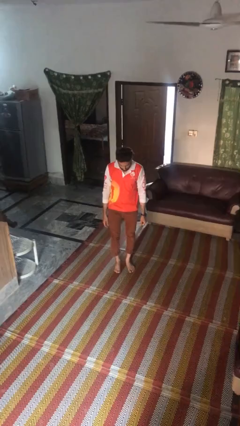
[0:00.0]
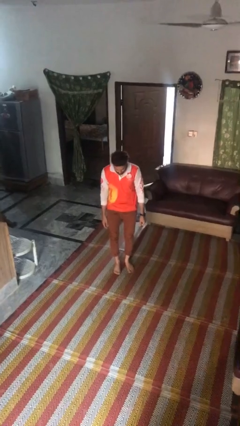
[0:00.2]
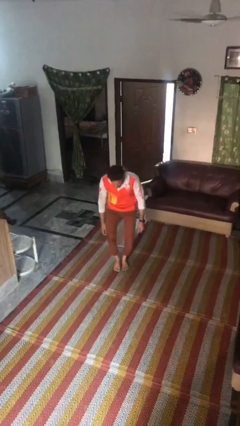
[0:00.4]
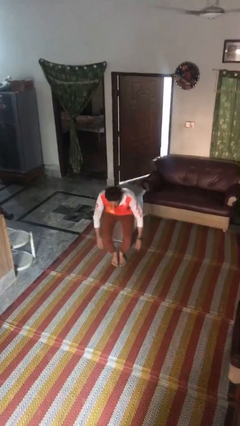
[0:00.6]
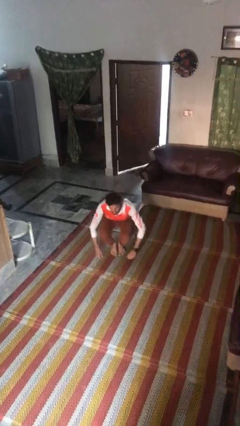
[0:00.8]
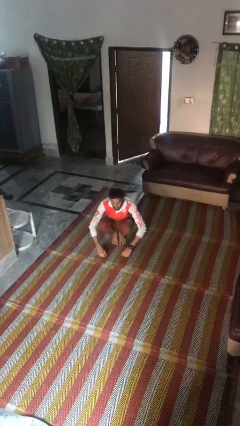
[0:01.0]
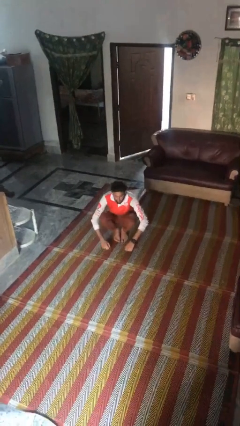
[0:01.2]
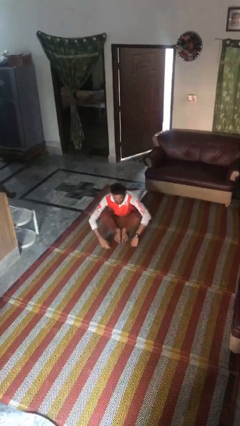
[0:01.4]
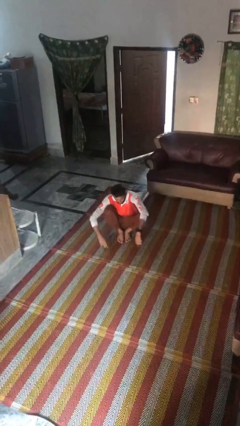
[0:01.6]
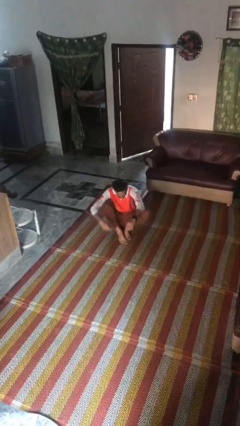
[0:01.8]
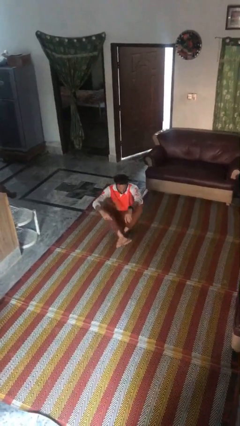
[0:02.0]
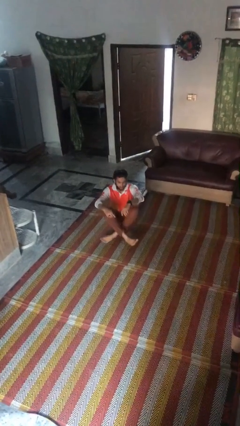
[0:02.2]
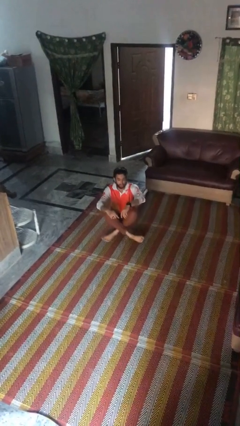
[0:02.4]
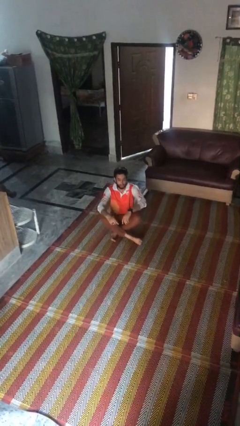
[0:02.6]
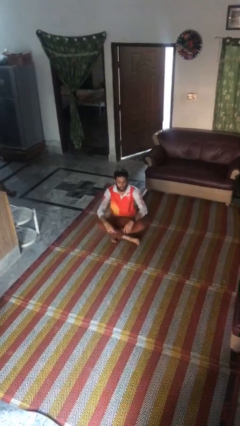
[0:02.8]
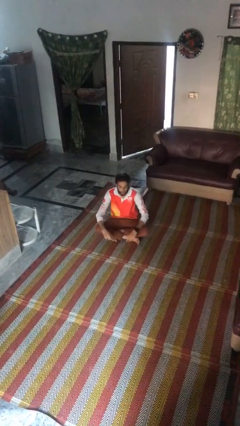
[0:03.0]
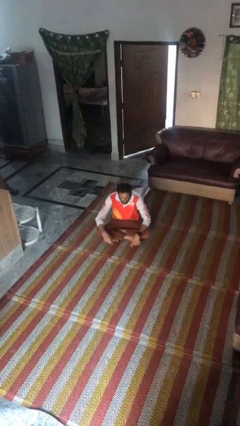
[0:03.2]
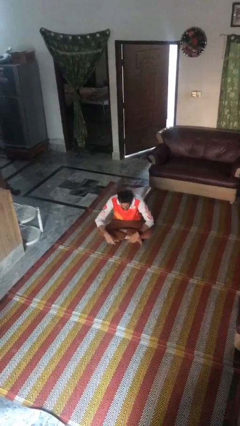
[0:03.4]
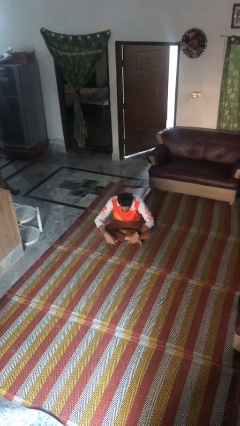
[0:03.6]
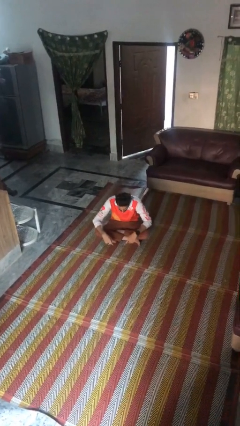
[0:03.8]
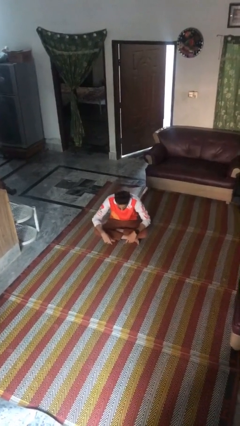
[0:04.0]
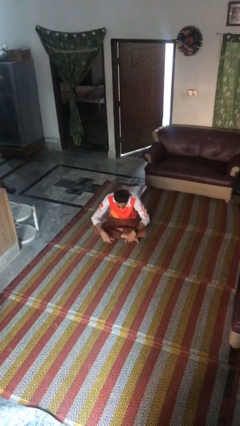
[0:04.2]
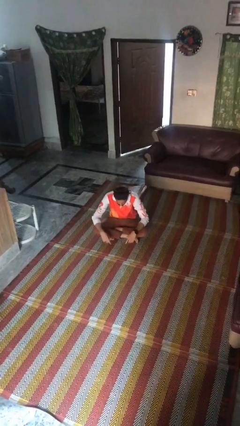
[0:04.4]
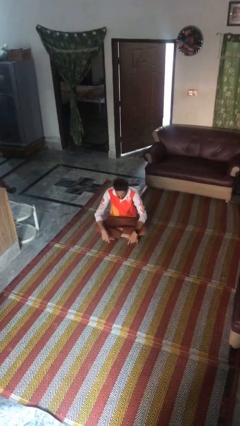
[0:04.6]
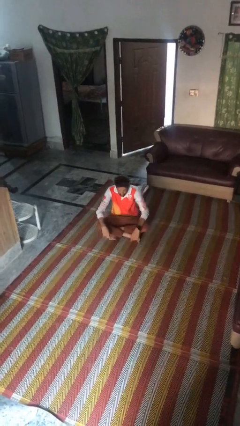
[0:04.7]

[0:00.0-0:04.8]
person sits crisscross

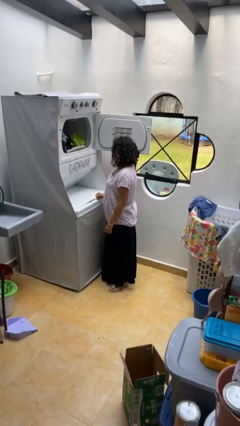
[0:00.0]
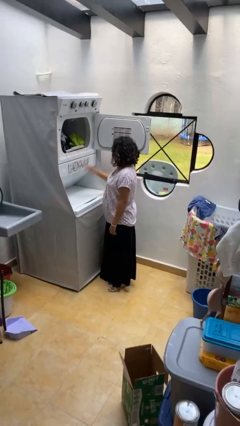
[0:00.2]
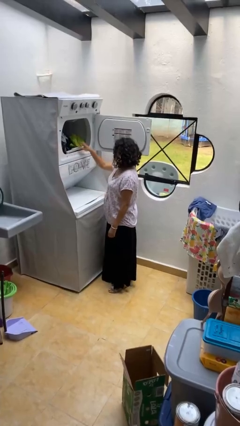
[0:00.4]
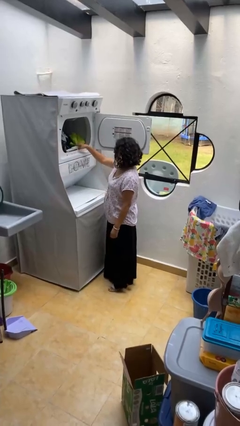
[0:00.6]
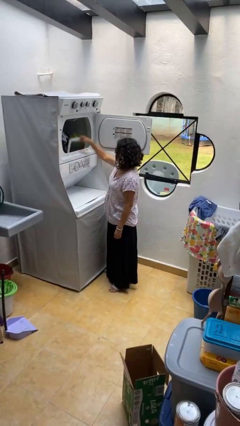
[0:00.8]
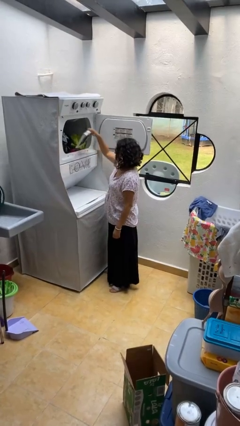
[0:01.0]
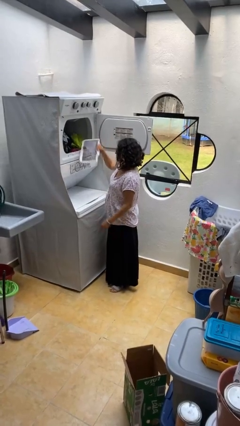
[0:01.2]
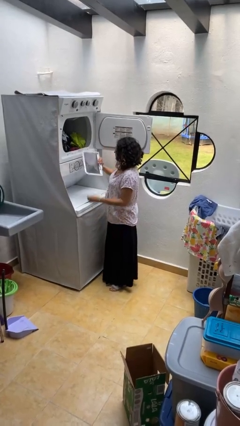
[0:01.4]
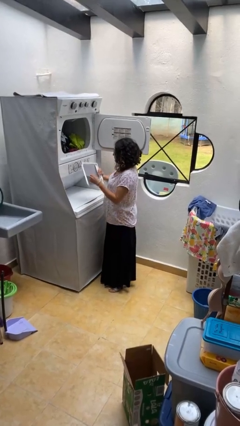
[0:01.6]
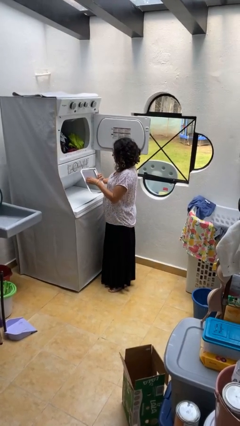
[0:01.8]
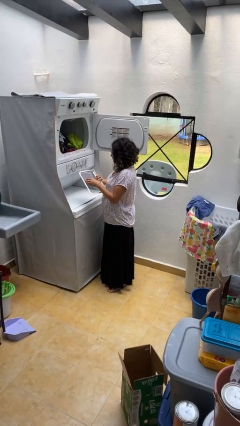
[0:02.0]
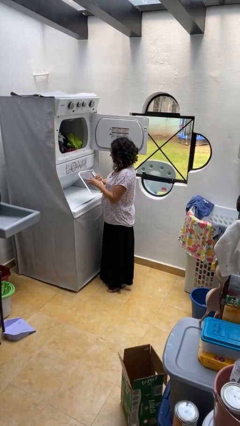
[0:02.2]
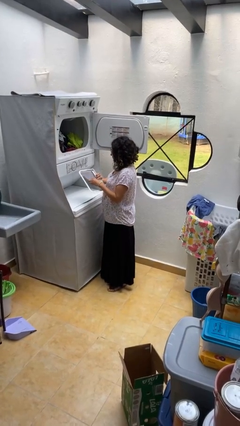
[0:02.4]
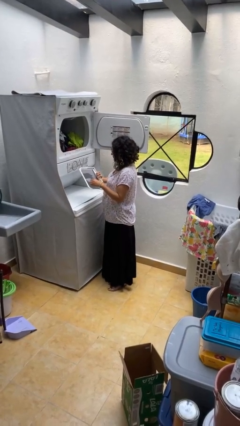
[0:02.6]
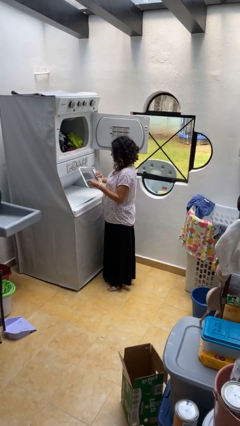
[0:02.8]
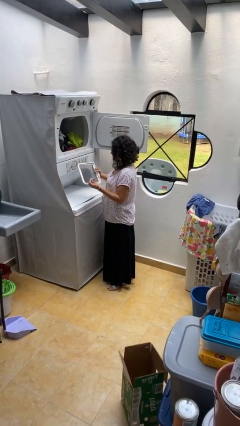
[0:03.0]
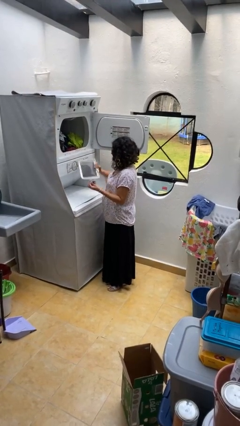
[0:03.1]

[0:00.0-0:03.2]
person cleans dryer lint trap

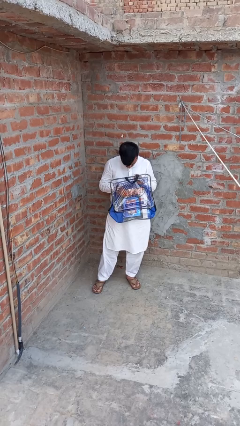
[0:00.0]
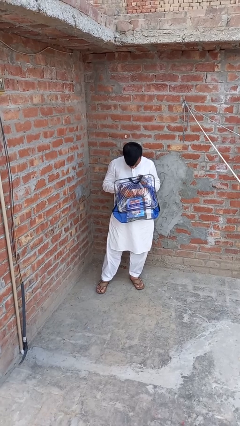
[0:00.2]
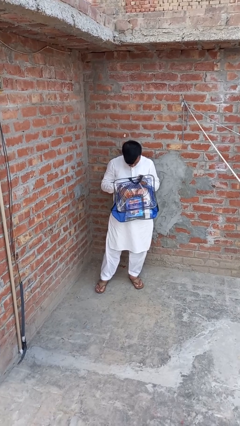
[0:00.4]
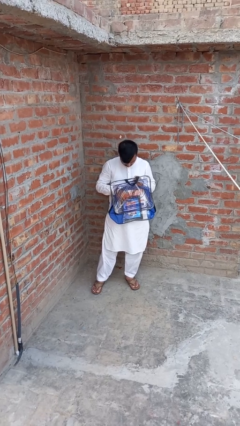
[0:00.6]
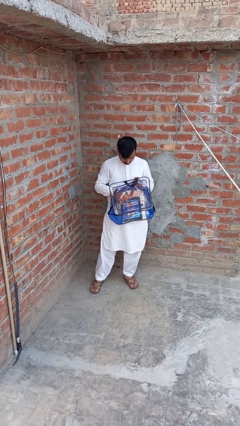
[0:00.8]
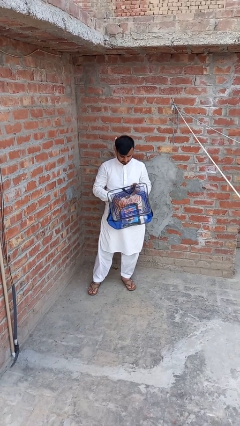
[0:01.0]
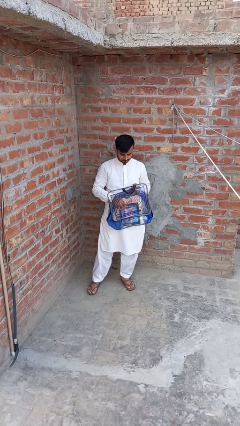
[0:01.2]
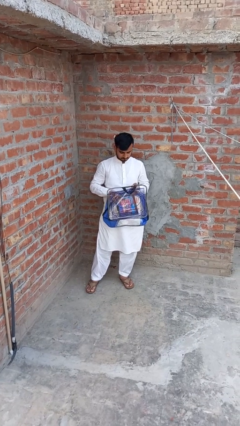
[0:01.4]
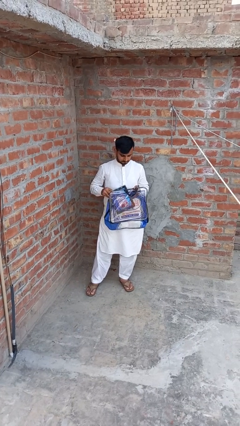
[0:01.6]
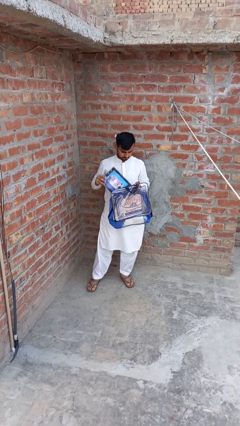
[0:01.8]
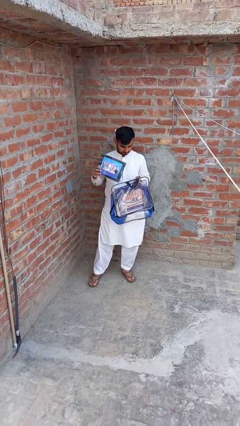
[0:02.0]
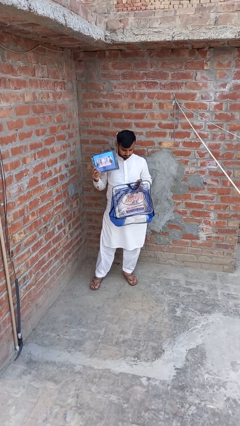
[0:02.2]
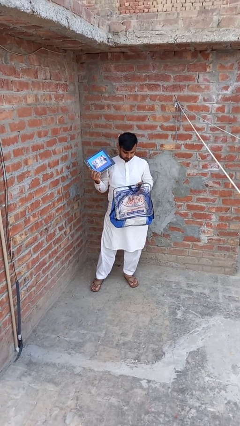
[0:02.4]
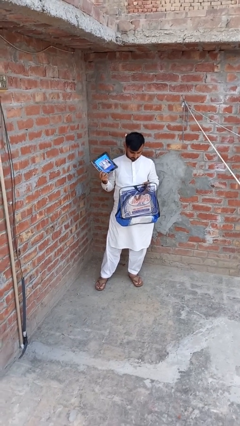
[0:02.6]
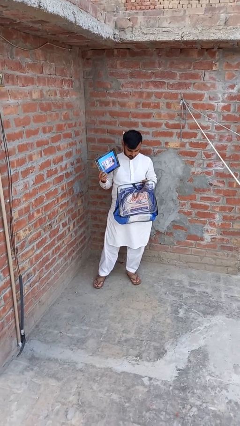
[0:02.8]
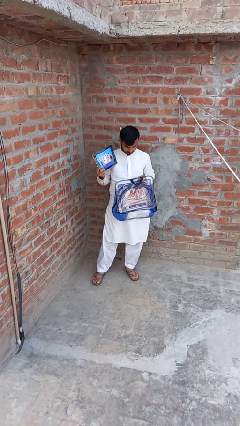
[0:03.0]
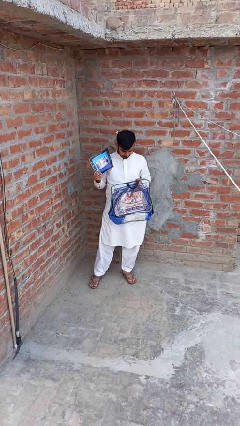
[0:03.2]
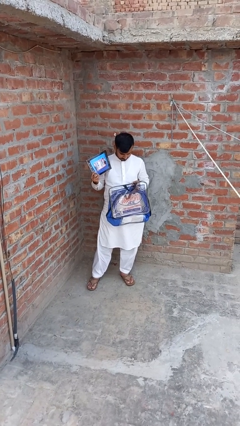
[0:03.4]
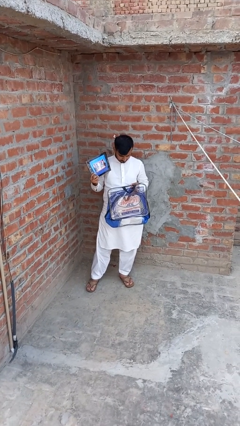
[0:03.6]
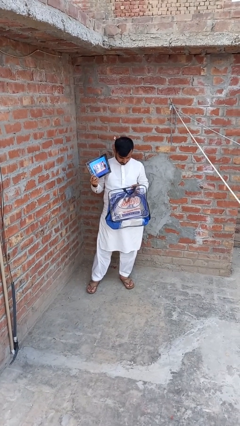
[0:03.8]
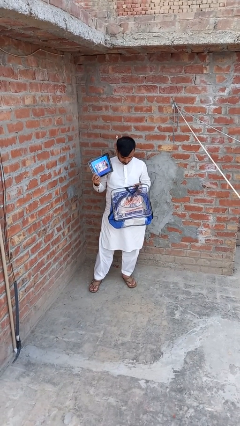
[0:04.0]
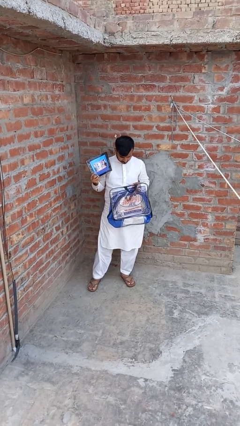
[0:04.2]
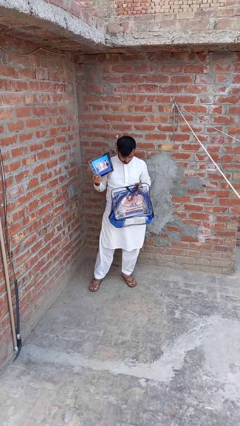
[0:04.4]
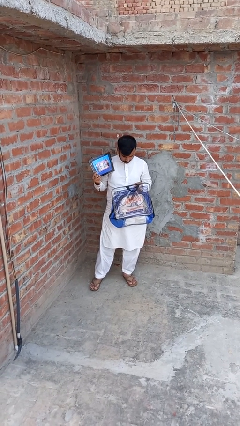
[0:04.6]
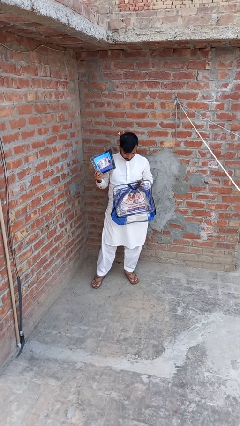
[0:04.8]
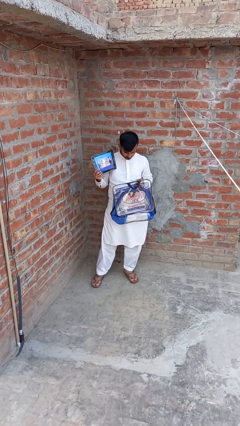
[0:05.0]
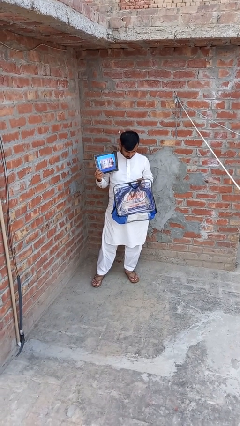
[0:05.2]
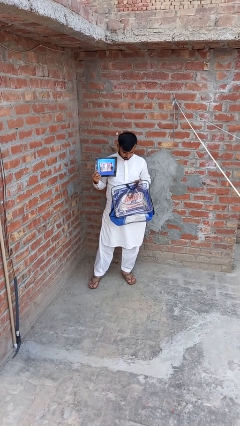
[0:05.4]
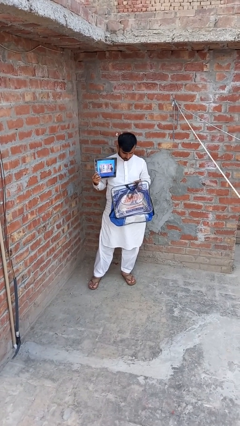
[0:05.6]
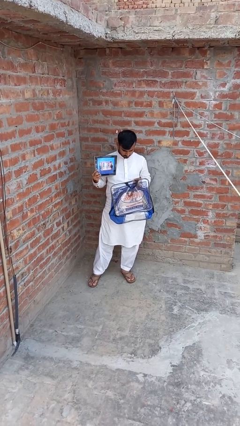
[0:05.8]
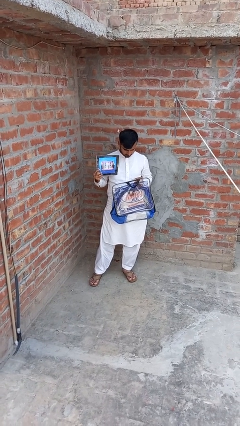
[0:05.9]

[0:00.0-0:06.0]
person takes object from backpack

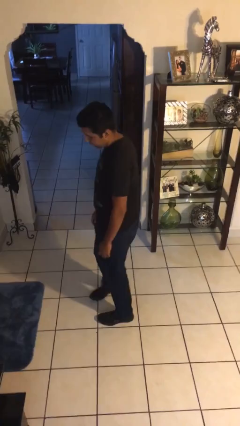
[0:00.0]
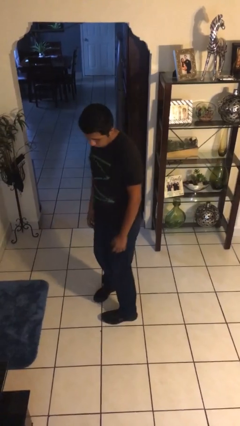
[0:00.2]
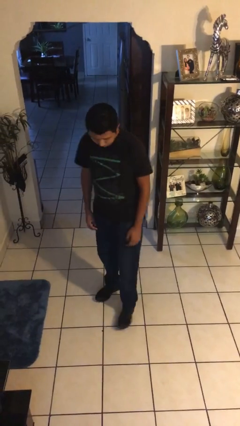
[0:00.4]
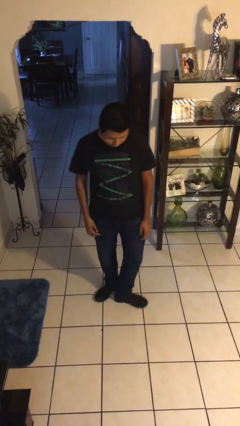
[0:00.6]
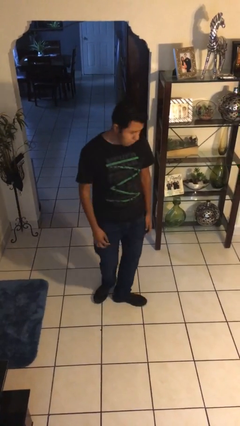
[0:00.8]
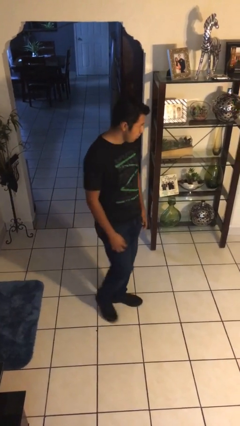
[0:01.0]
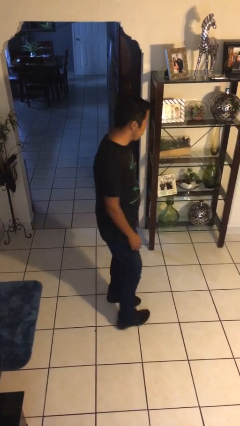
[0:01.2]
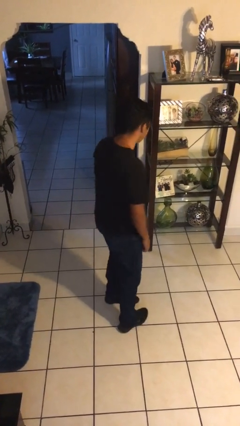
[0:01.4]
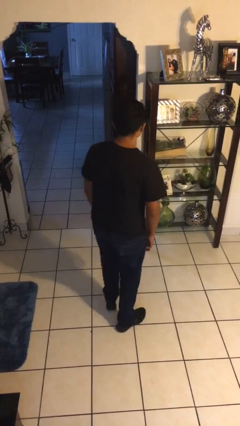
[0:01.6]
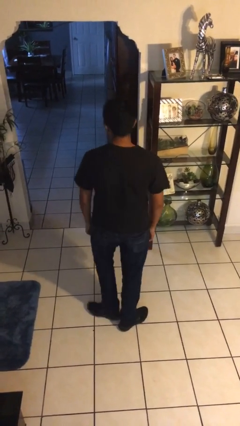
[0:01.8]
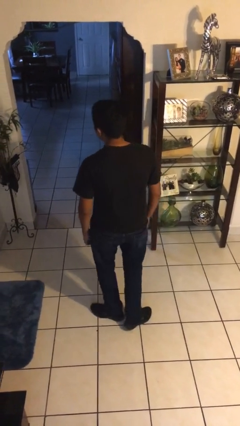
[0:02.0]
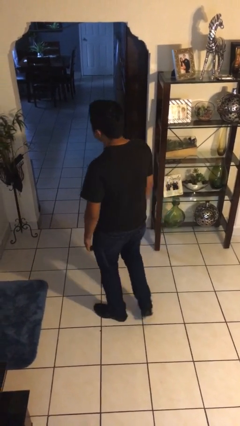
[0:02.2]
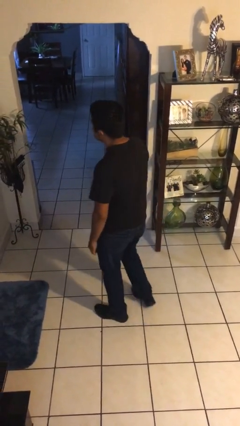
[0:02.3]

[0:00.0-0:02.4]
person twirls

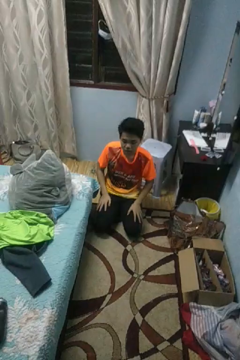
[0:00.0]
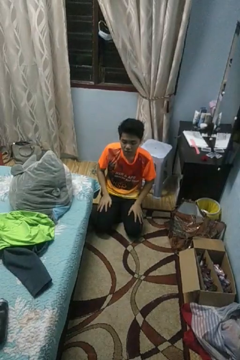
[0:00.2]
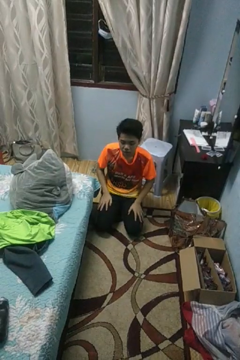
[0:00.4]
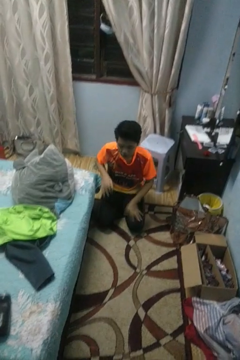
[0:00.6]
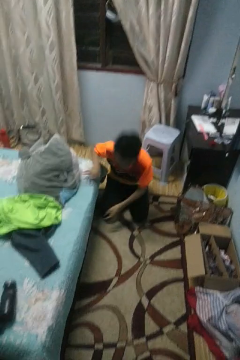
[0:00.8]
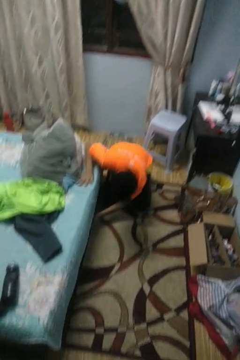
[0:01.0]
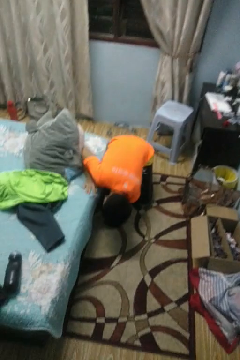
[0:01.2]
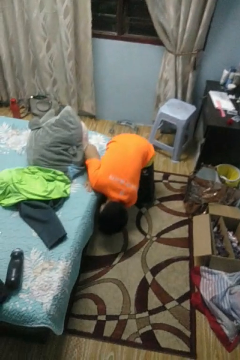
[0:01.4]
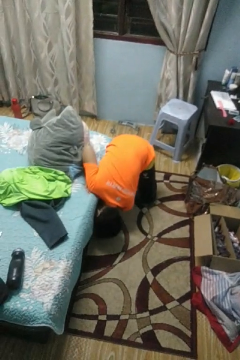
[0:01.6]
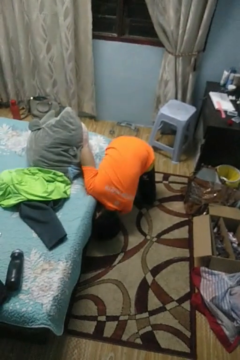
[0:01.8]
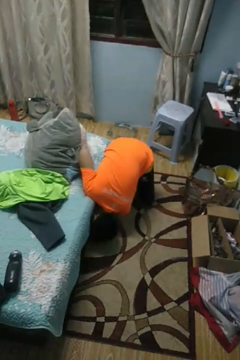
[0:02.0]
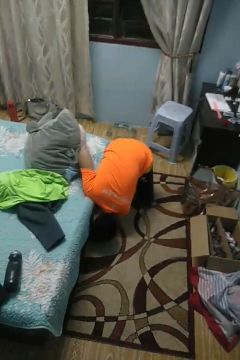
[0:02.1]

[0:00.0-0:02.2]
person searches under bed
